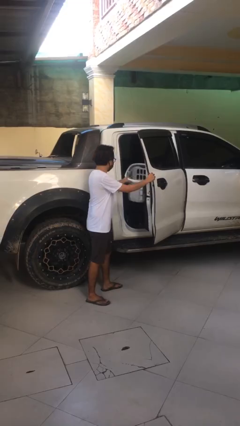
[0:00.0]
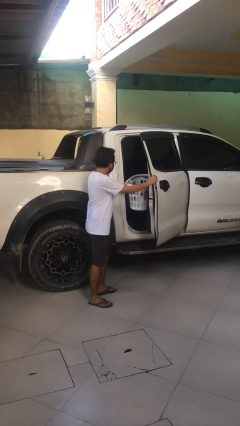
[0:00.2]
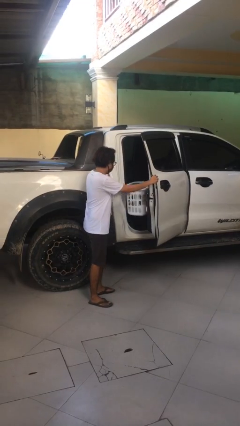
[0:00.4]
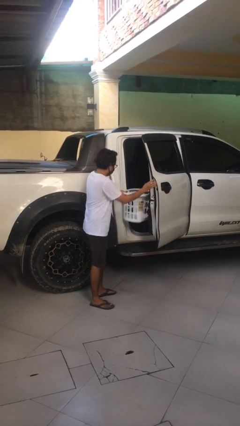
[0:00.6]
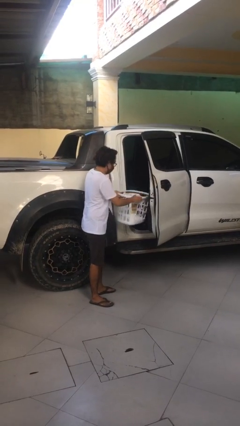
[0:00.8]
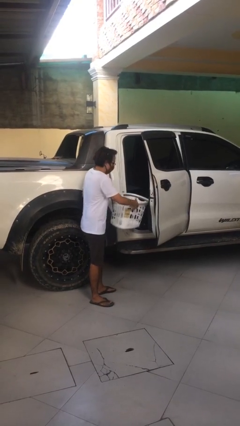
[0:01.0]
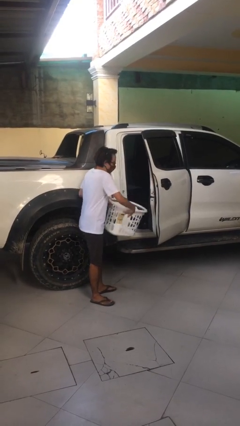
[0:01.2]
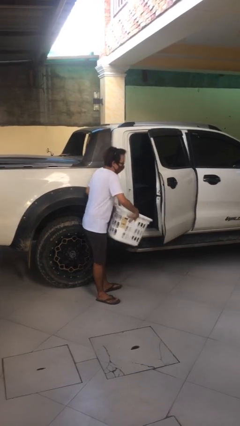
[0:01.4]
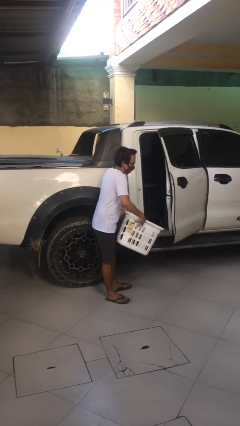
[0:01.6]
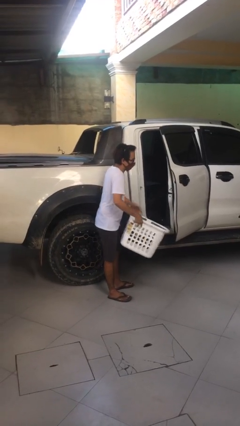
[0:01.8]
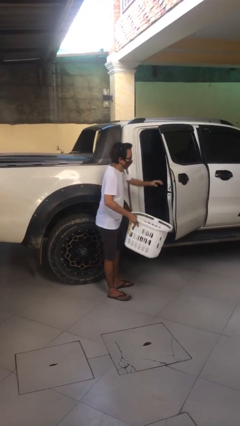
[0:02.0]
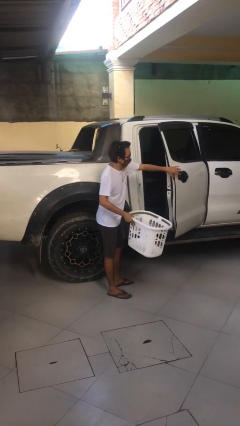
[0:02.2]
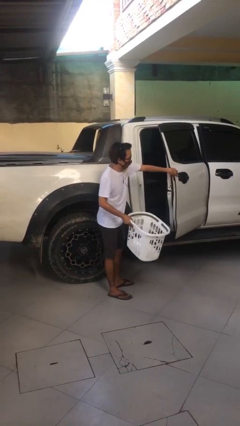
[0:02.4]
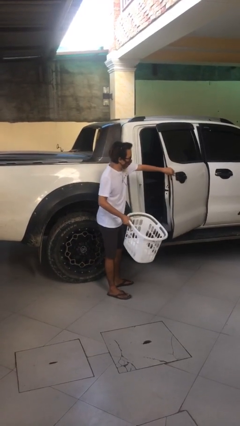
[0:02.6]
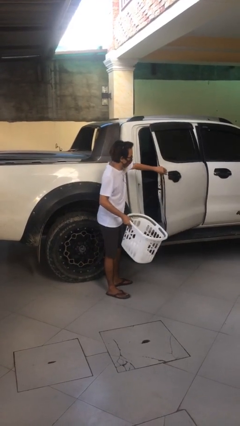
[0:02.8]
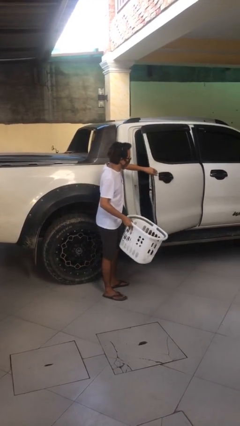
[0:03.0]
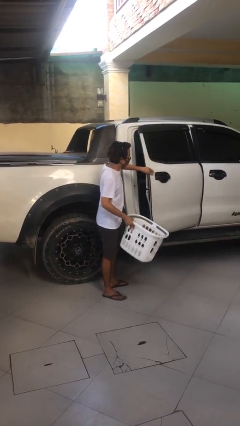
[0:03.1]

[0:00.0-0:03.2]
person unloads car

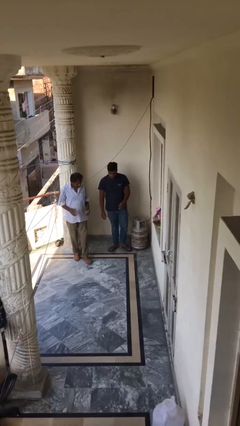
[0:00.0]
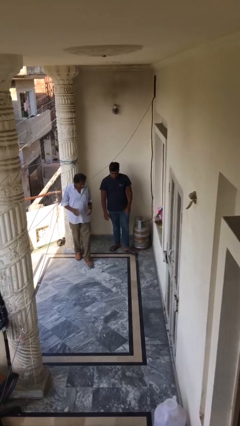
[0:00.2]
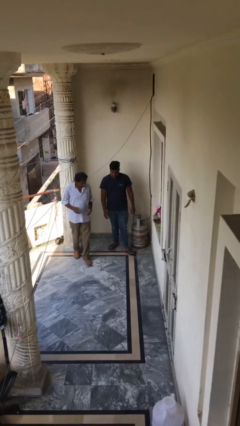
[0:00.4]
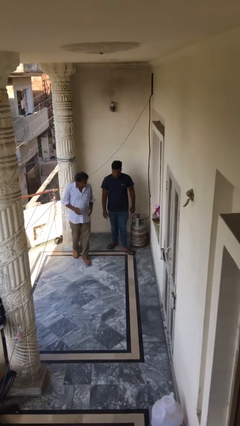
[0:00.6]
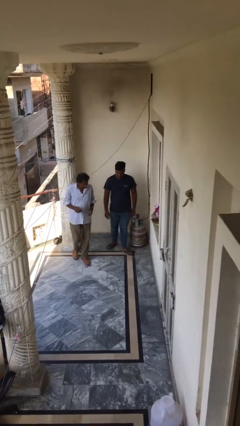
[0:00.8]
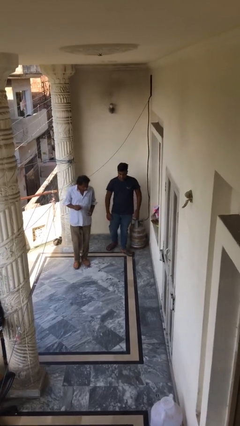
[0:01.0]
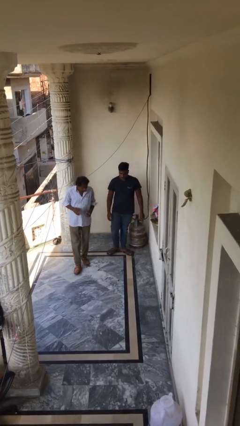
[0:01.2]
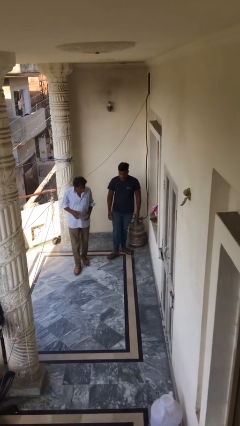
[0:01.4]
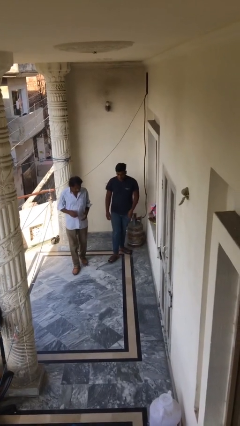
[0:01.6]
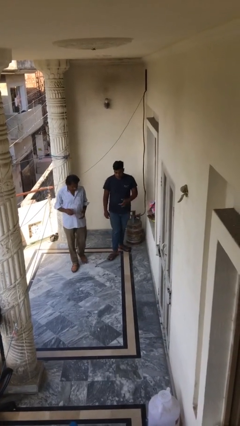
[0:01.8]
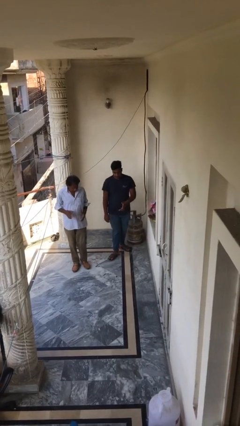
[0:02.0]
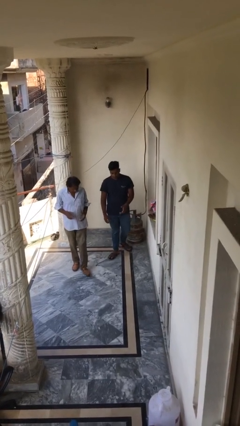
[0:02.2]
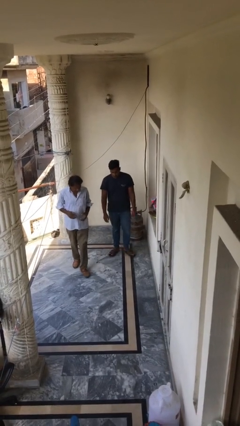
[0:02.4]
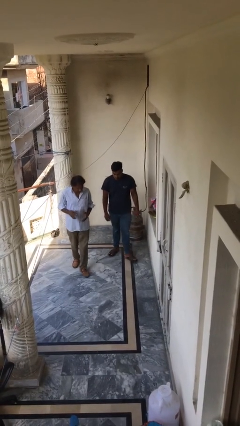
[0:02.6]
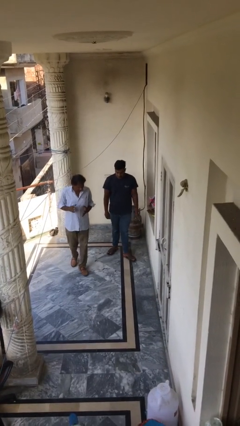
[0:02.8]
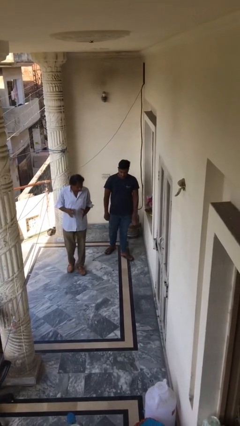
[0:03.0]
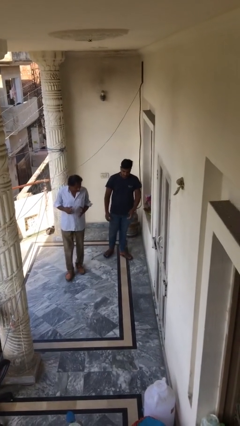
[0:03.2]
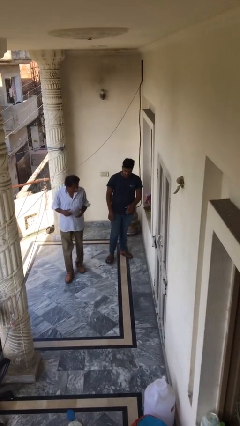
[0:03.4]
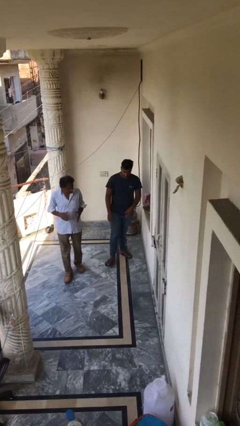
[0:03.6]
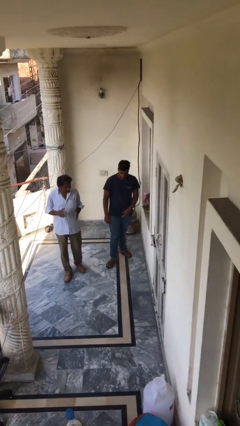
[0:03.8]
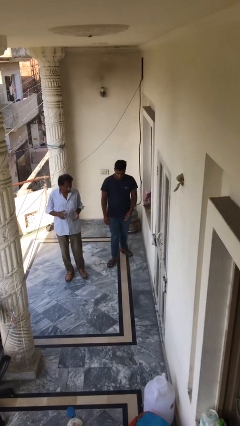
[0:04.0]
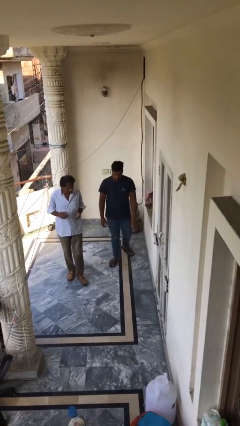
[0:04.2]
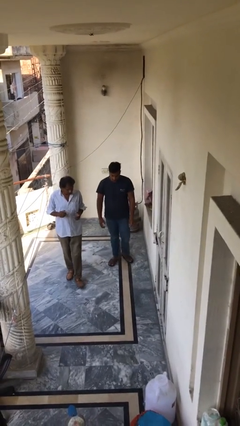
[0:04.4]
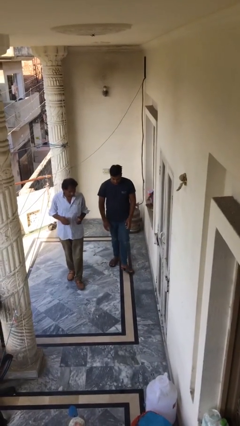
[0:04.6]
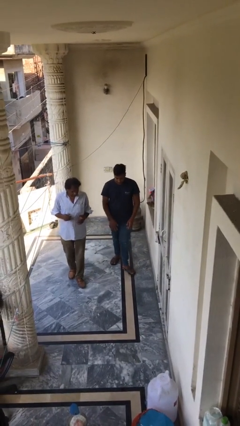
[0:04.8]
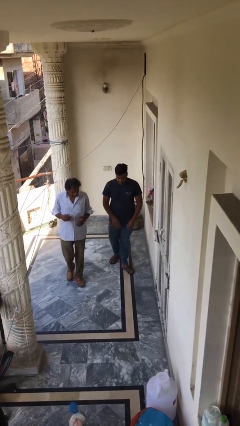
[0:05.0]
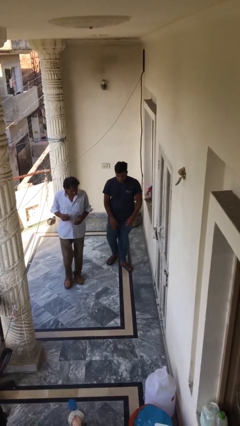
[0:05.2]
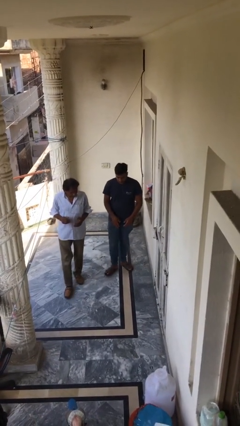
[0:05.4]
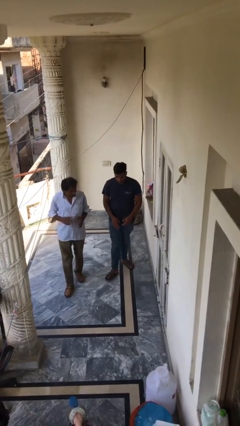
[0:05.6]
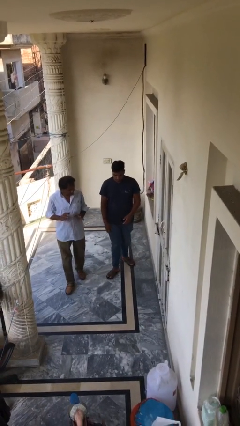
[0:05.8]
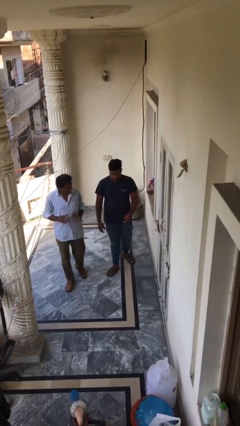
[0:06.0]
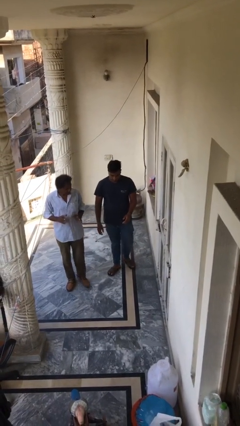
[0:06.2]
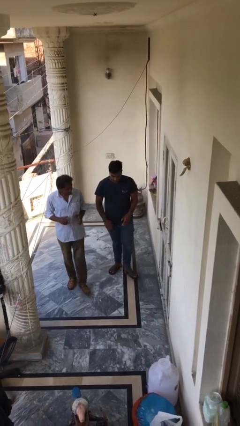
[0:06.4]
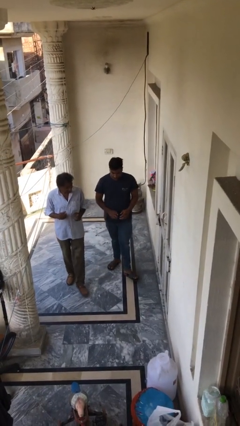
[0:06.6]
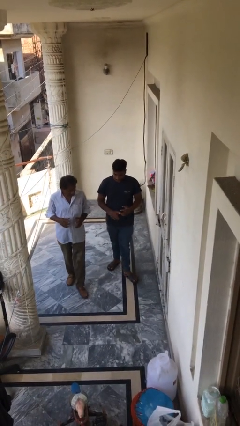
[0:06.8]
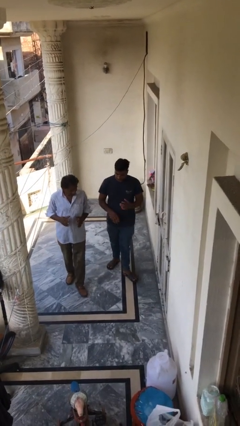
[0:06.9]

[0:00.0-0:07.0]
person talks to person

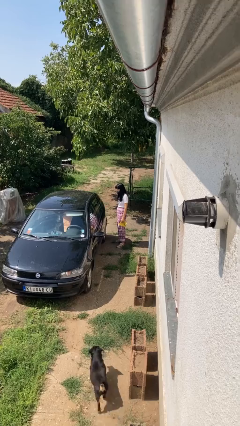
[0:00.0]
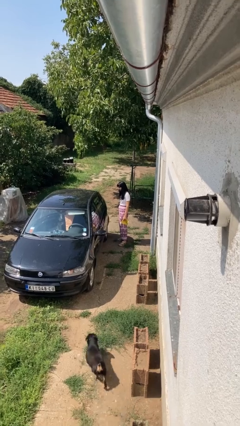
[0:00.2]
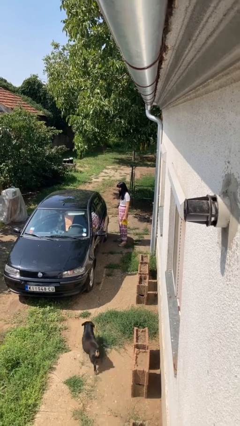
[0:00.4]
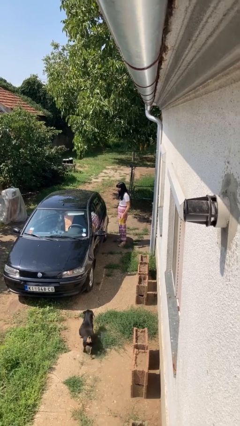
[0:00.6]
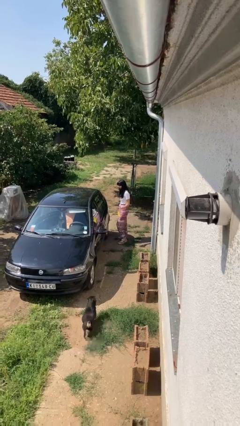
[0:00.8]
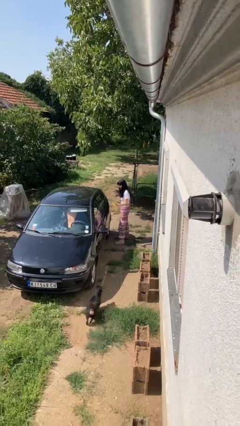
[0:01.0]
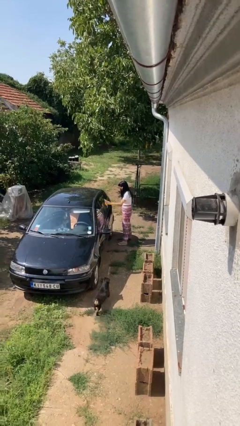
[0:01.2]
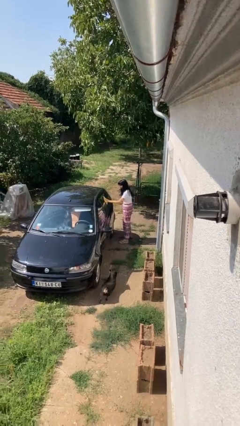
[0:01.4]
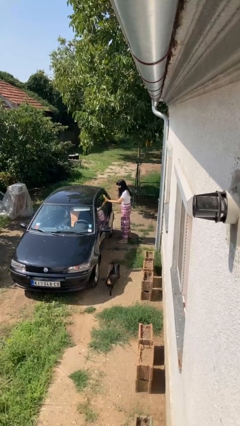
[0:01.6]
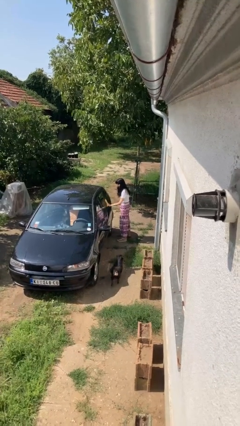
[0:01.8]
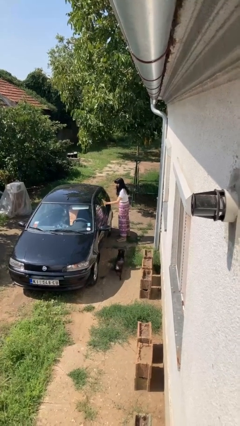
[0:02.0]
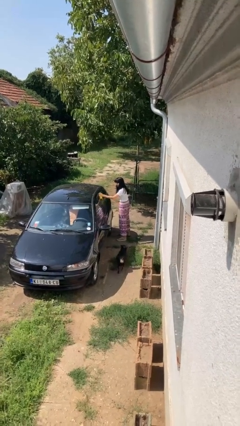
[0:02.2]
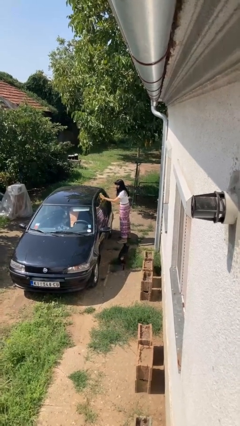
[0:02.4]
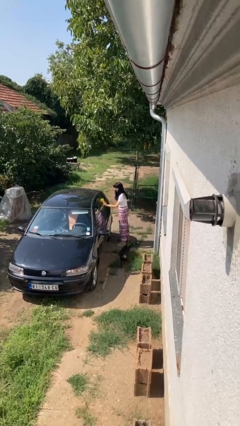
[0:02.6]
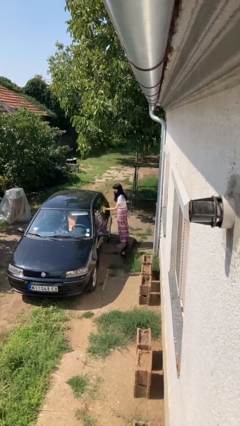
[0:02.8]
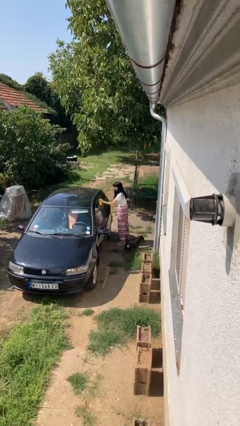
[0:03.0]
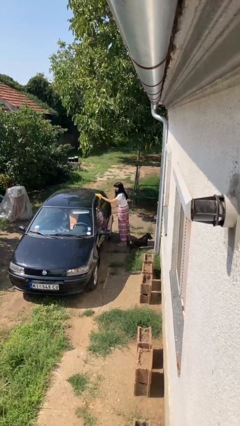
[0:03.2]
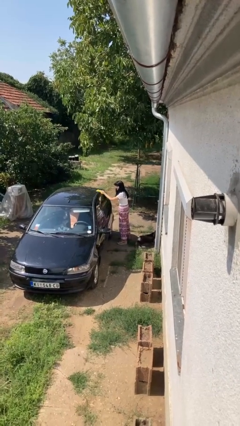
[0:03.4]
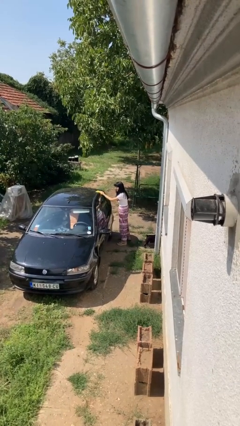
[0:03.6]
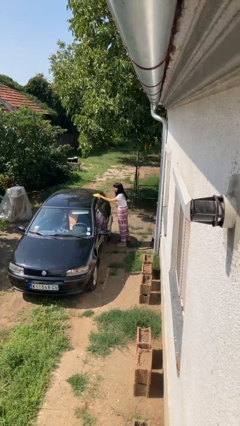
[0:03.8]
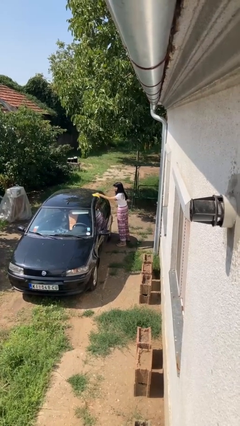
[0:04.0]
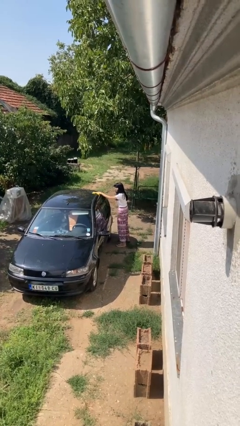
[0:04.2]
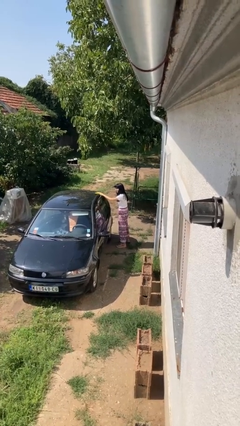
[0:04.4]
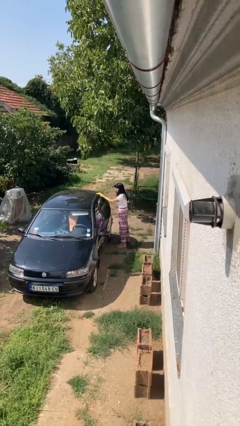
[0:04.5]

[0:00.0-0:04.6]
person polishes car with rag

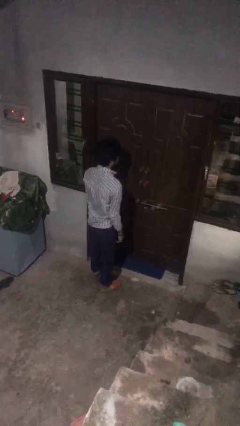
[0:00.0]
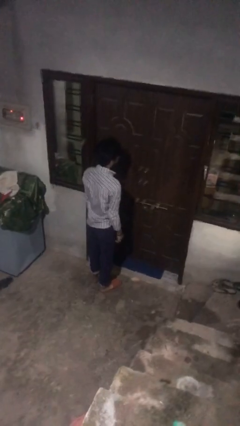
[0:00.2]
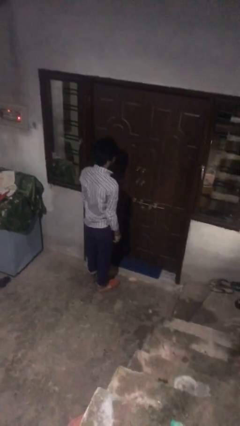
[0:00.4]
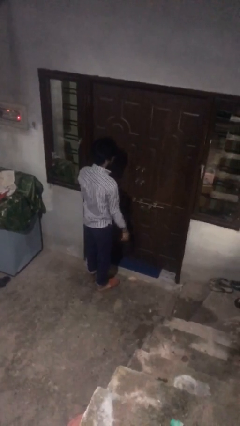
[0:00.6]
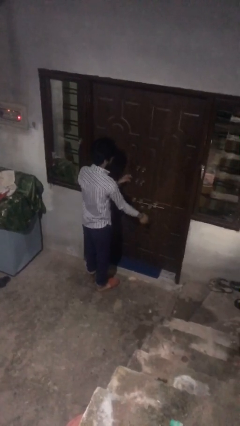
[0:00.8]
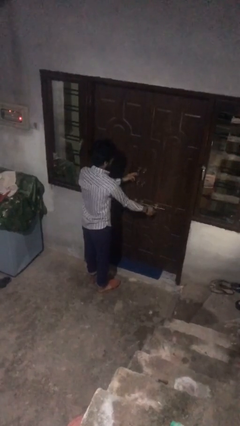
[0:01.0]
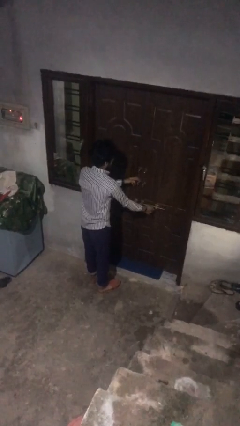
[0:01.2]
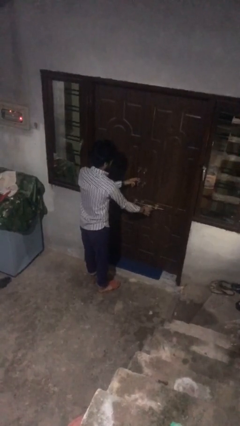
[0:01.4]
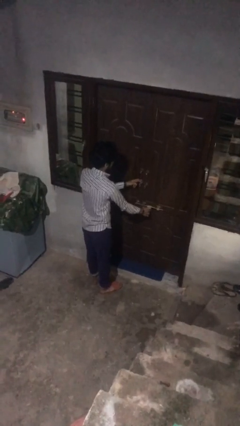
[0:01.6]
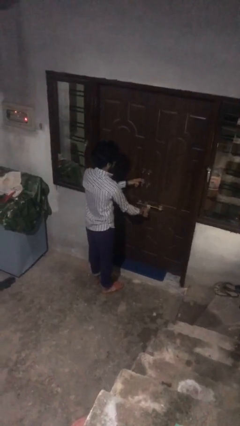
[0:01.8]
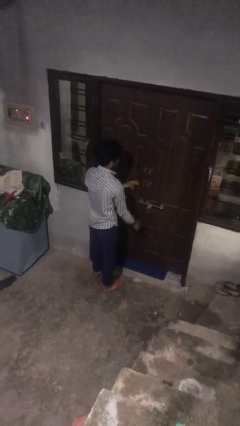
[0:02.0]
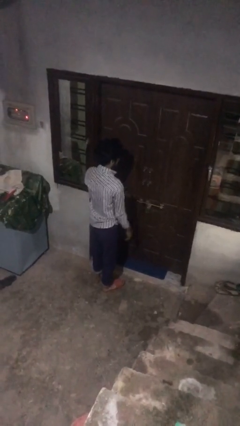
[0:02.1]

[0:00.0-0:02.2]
person locks door with keys

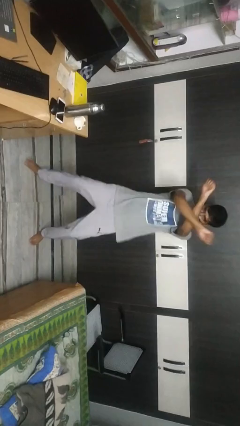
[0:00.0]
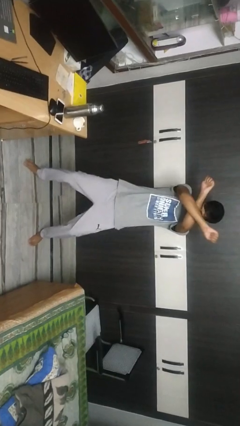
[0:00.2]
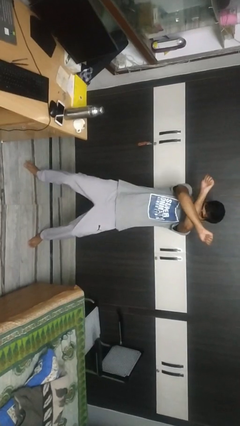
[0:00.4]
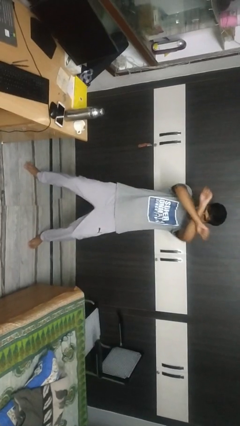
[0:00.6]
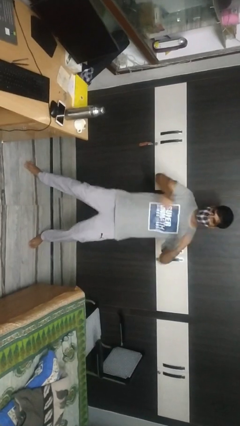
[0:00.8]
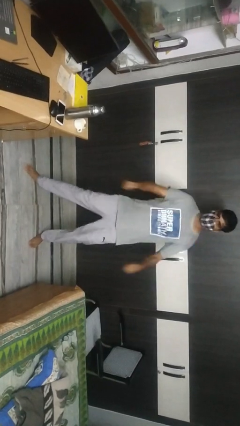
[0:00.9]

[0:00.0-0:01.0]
person gestures arms x
